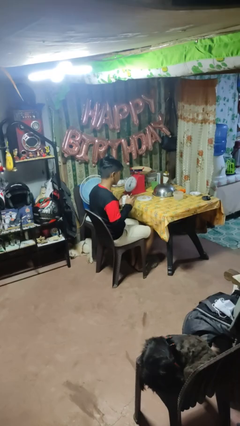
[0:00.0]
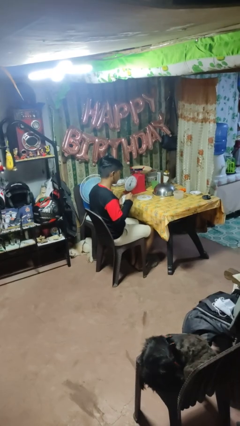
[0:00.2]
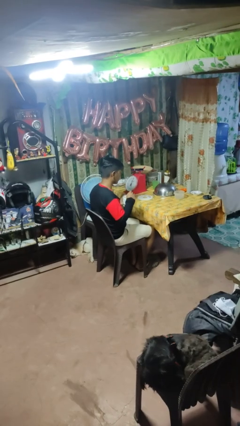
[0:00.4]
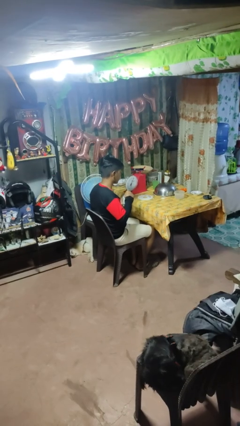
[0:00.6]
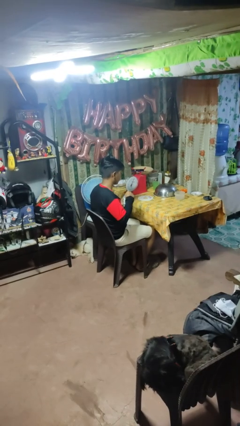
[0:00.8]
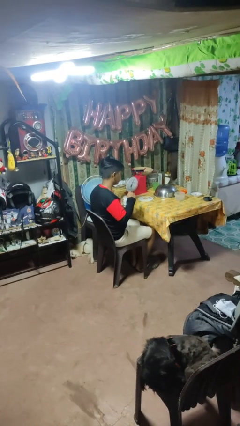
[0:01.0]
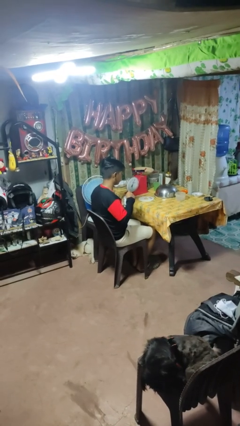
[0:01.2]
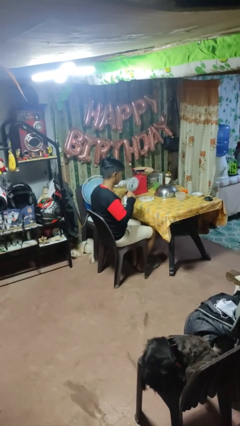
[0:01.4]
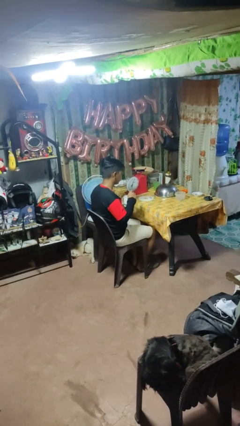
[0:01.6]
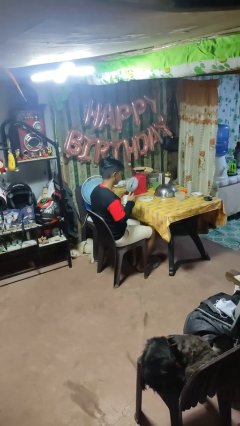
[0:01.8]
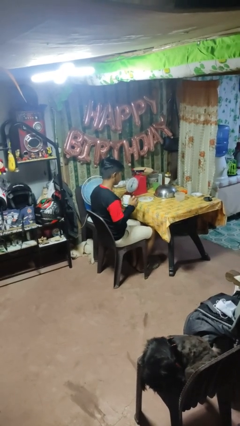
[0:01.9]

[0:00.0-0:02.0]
person stirs mug

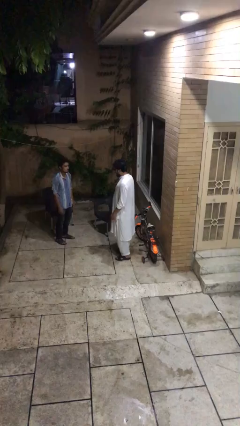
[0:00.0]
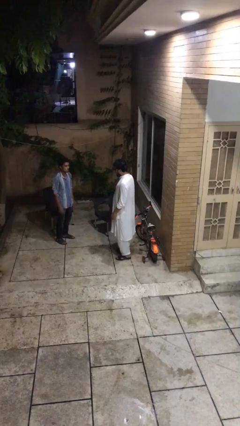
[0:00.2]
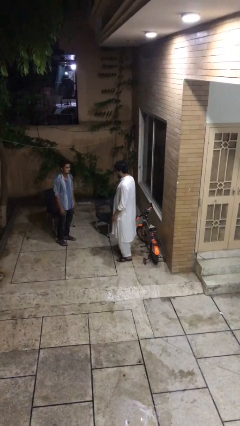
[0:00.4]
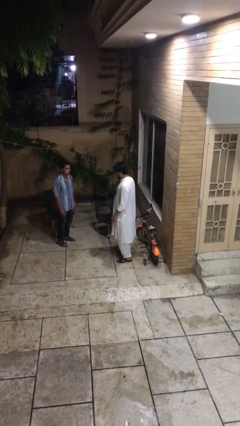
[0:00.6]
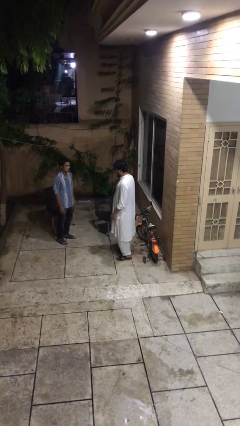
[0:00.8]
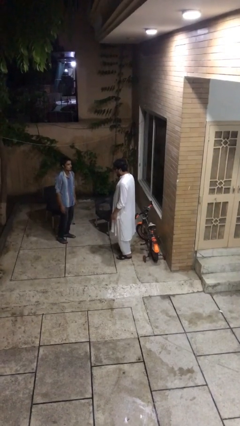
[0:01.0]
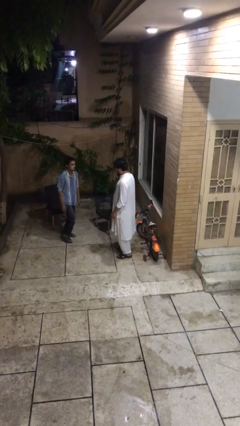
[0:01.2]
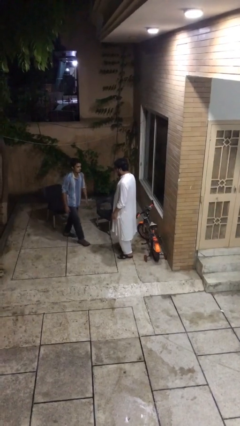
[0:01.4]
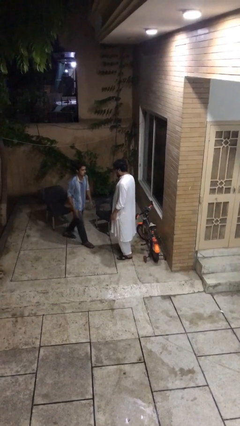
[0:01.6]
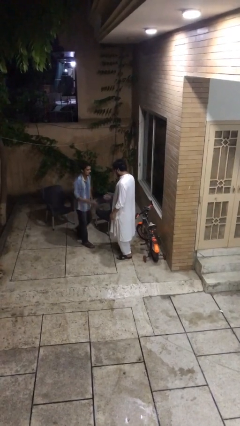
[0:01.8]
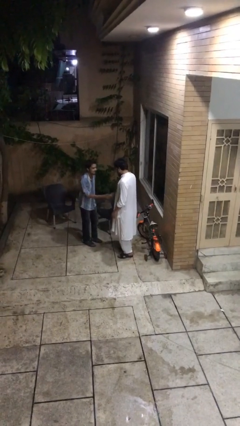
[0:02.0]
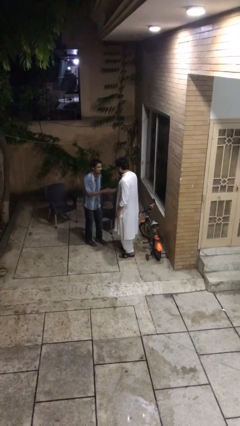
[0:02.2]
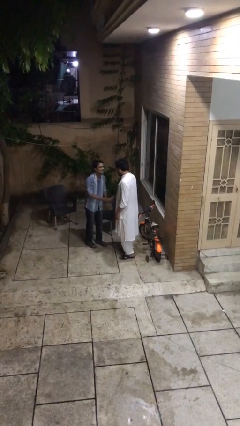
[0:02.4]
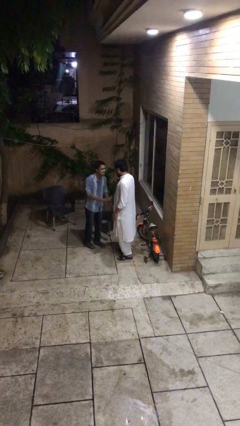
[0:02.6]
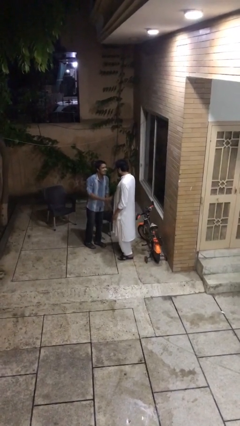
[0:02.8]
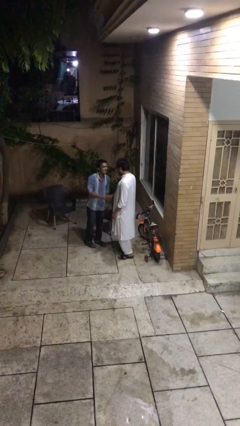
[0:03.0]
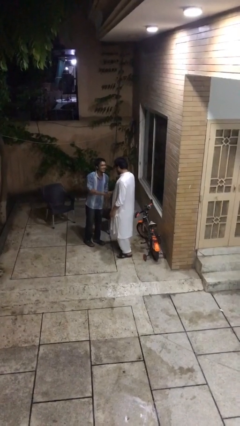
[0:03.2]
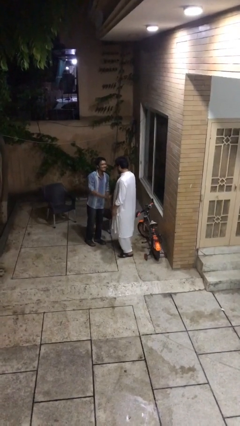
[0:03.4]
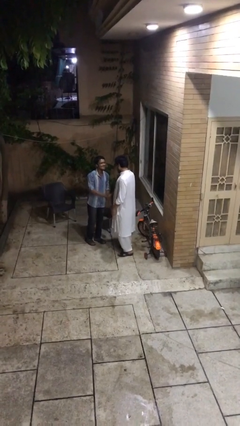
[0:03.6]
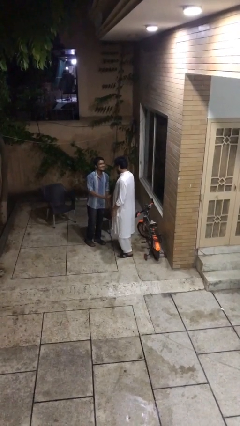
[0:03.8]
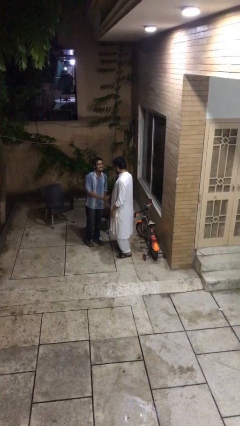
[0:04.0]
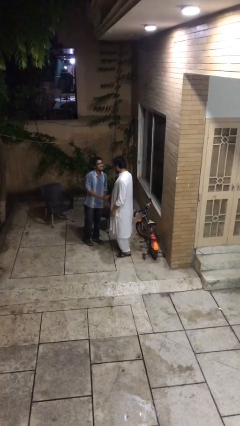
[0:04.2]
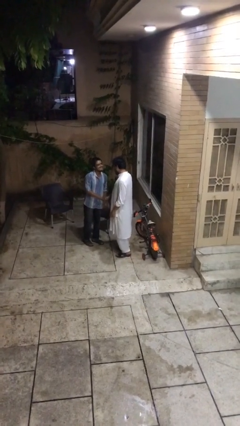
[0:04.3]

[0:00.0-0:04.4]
person shakes hand

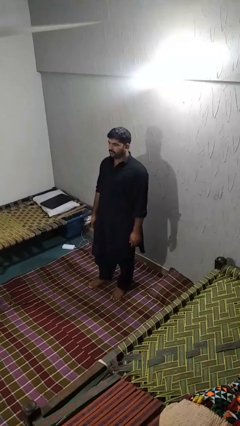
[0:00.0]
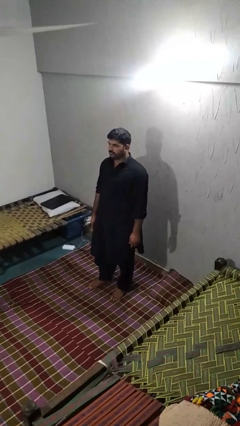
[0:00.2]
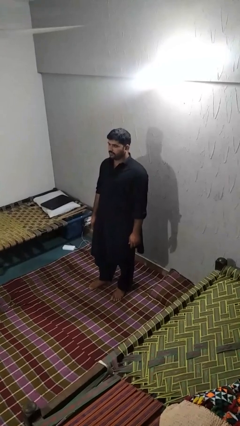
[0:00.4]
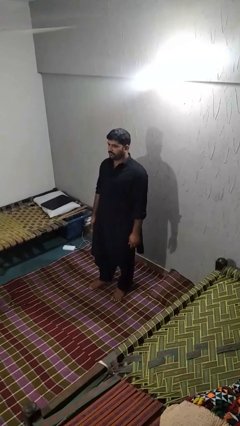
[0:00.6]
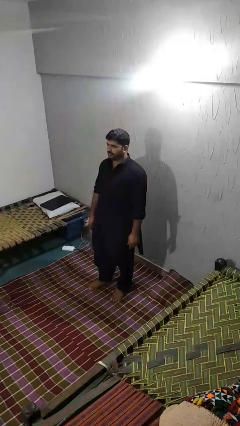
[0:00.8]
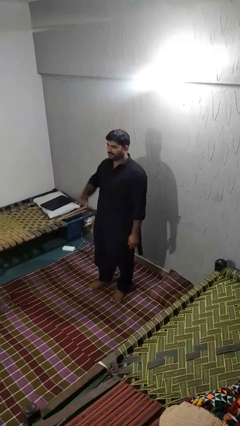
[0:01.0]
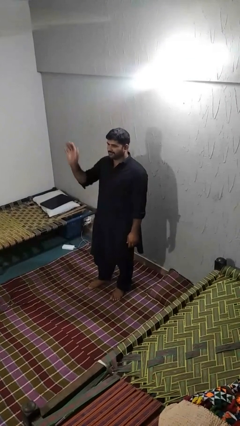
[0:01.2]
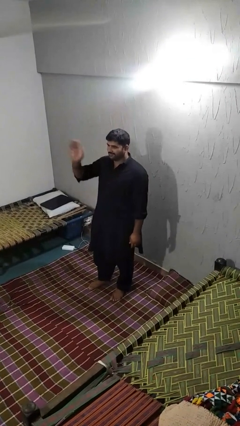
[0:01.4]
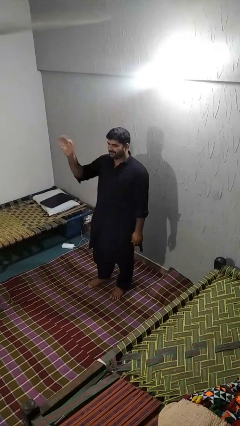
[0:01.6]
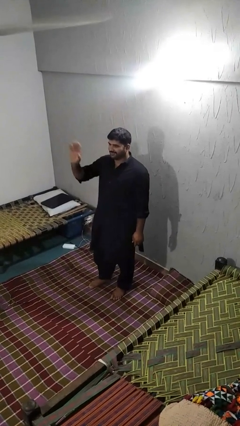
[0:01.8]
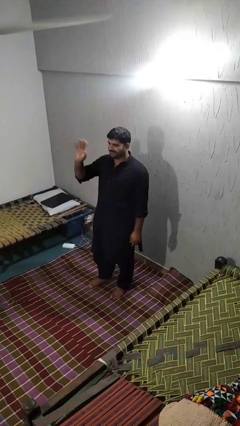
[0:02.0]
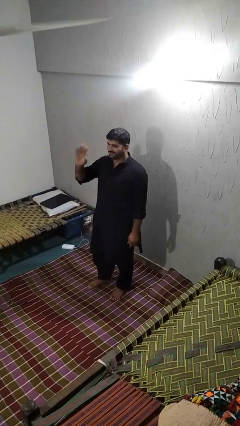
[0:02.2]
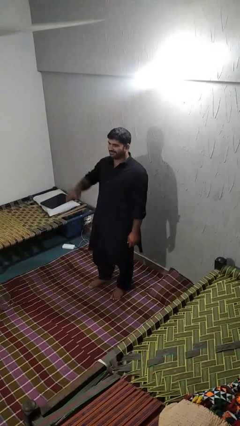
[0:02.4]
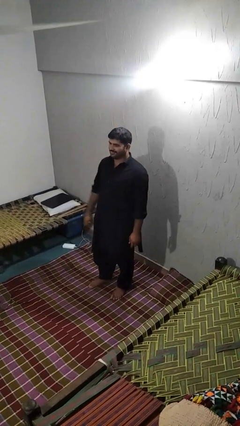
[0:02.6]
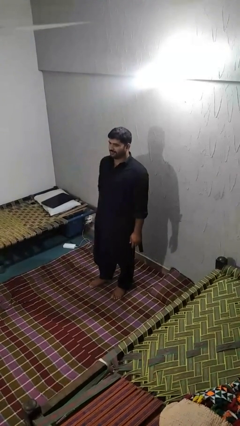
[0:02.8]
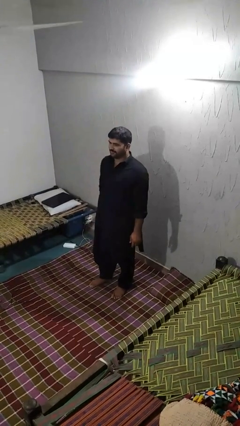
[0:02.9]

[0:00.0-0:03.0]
person waves at person

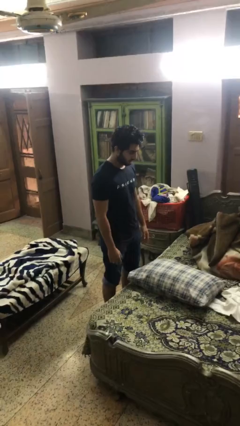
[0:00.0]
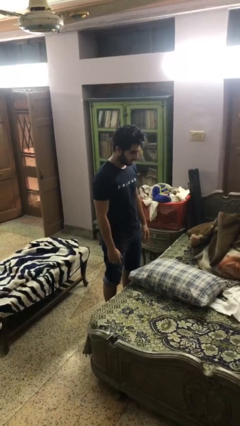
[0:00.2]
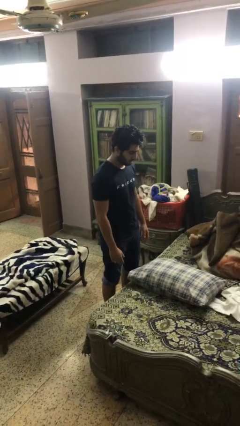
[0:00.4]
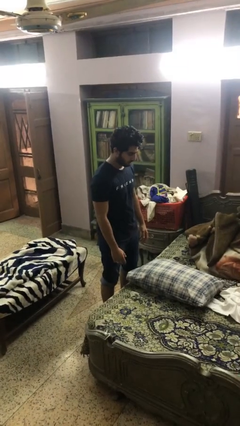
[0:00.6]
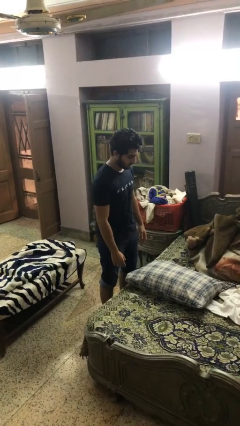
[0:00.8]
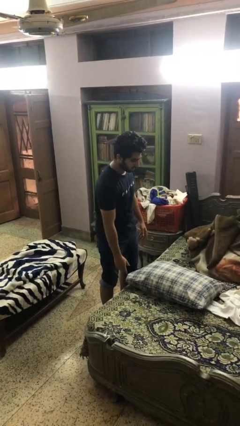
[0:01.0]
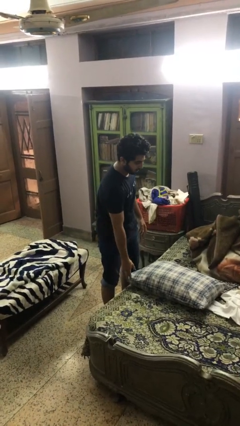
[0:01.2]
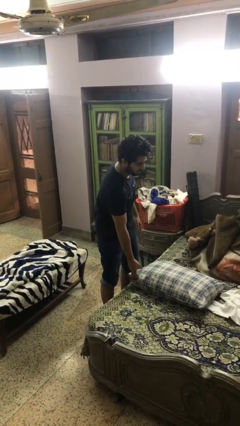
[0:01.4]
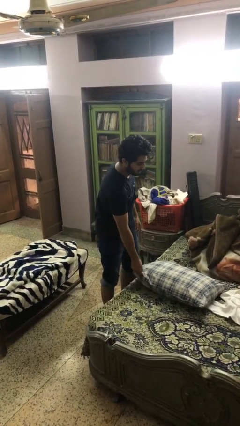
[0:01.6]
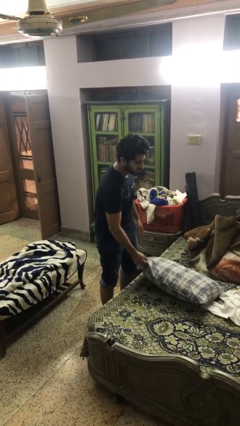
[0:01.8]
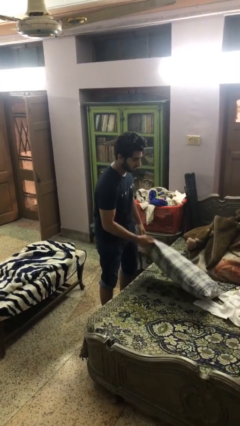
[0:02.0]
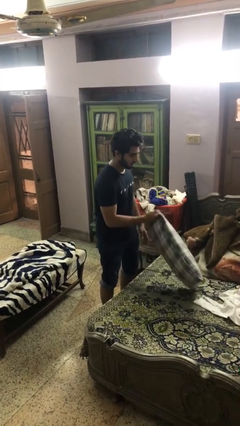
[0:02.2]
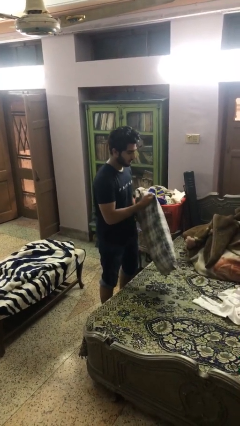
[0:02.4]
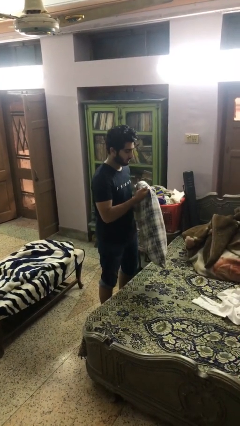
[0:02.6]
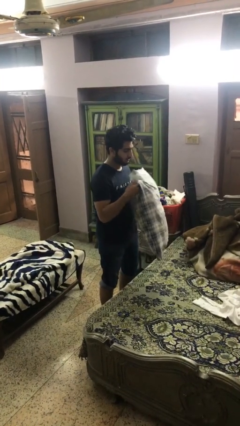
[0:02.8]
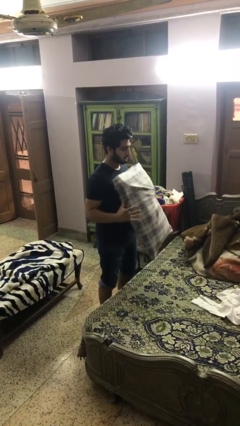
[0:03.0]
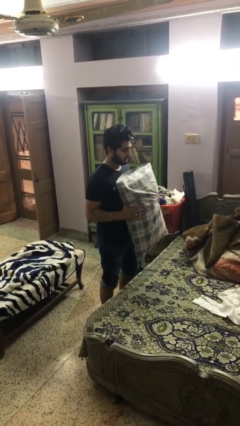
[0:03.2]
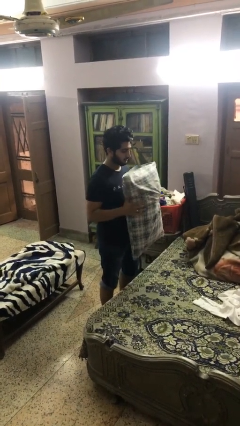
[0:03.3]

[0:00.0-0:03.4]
person picks up object from bed

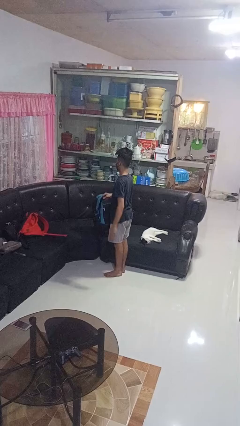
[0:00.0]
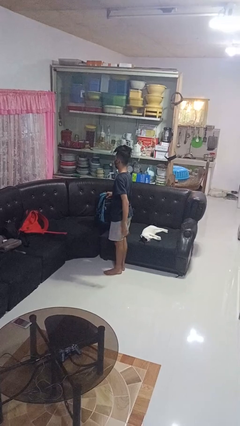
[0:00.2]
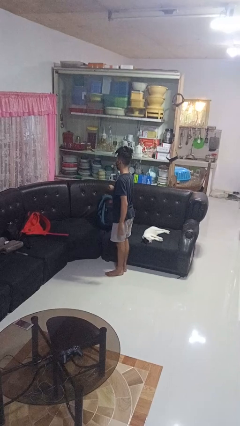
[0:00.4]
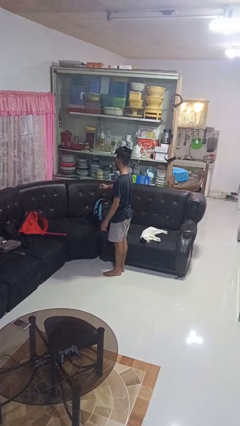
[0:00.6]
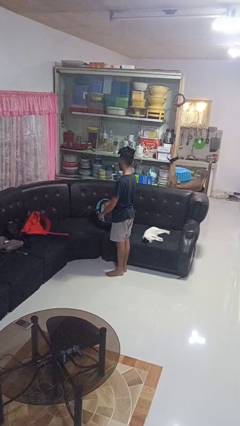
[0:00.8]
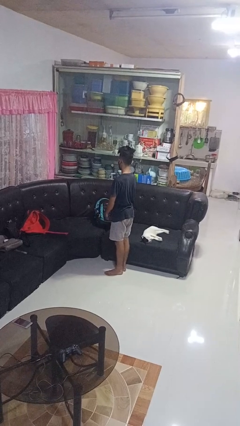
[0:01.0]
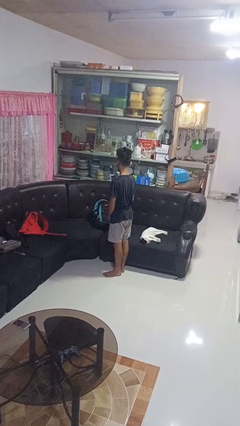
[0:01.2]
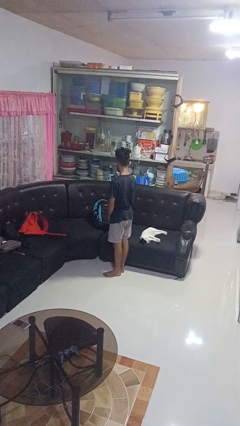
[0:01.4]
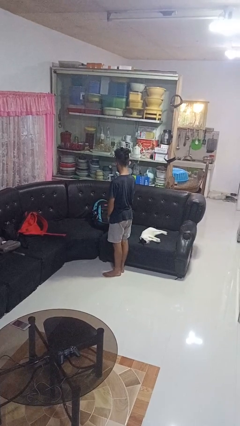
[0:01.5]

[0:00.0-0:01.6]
person puts down object on couch

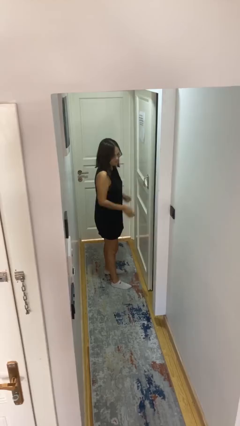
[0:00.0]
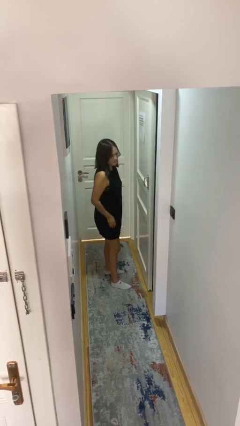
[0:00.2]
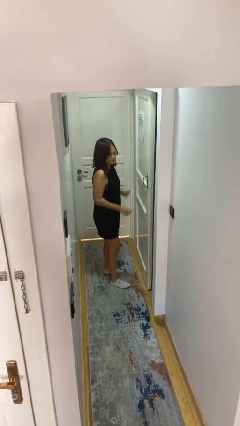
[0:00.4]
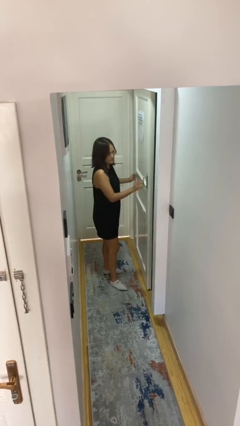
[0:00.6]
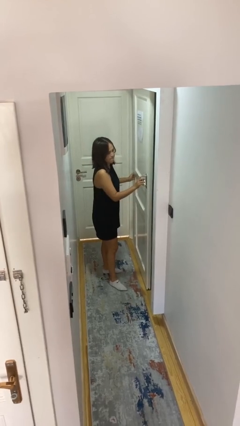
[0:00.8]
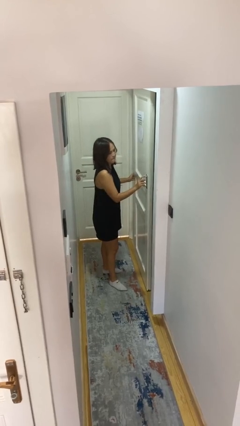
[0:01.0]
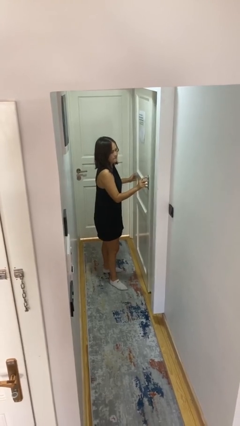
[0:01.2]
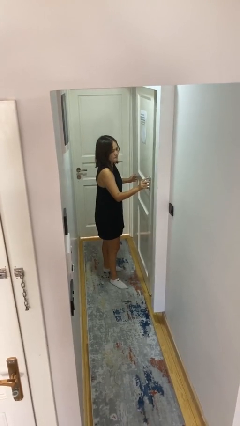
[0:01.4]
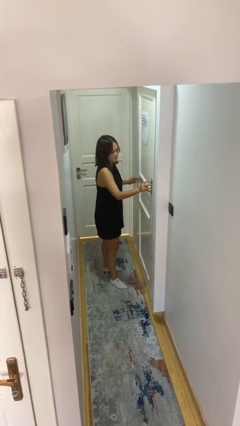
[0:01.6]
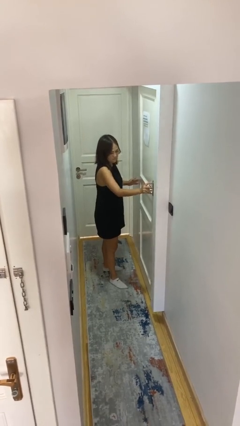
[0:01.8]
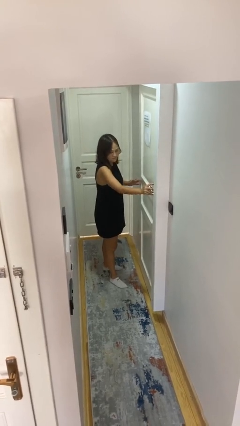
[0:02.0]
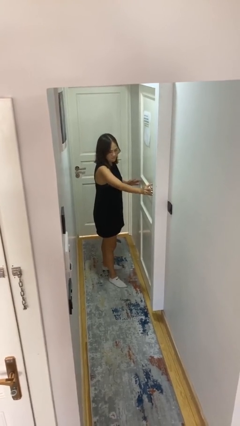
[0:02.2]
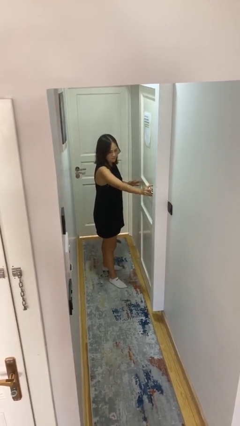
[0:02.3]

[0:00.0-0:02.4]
person closes sliding door

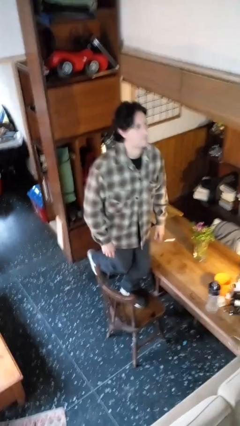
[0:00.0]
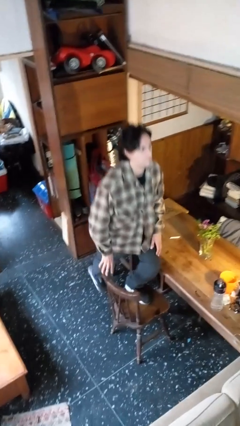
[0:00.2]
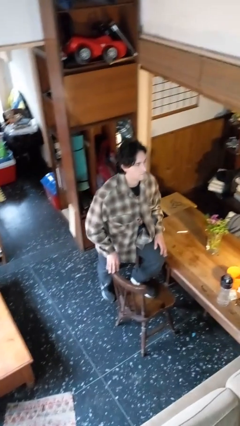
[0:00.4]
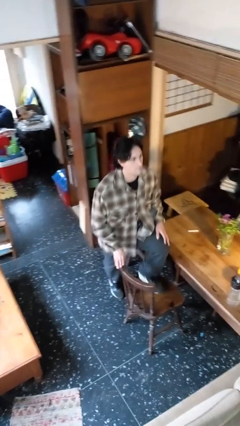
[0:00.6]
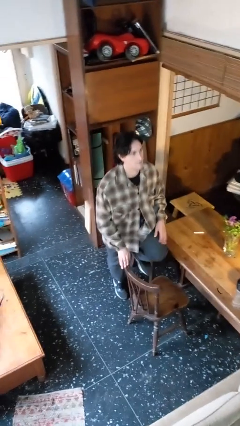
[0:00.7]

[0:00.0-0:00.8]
person climbs off chair
